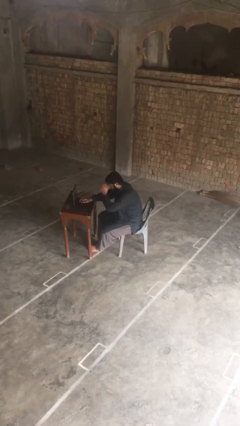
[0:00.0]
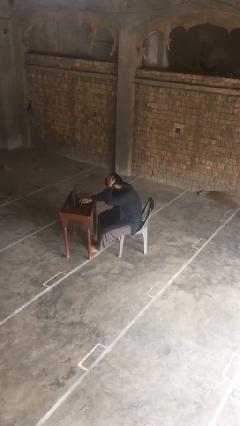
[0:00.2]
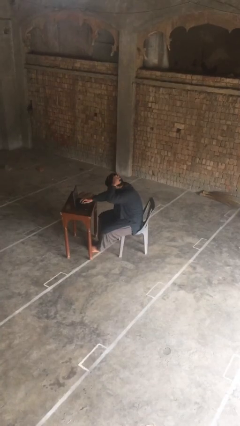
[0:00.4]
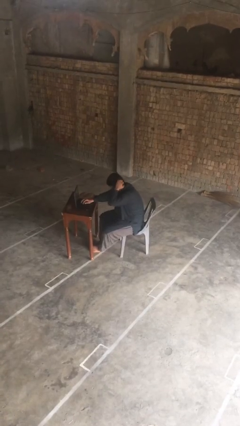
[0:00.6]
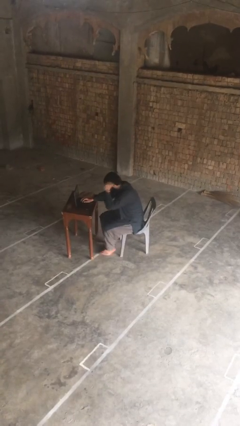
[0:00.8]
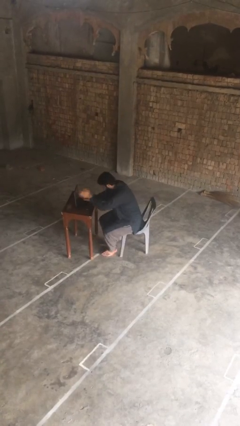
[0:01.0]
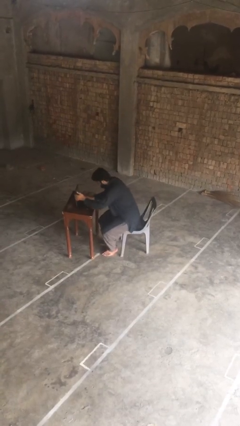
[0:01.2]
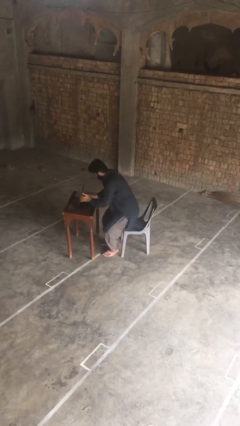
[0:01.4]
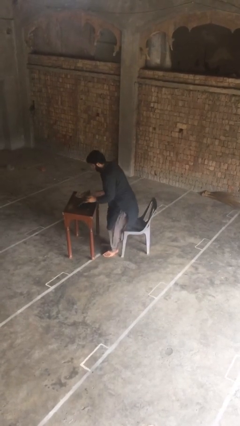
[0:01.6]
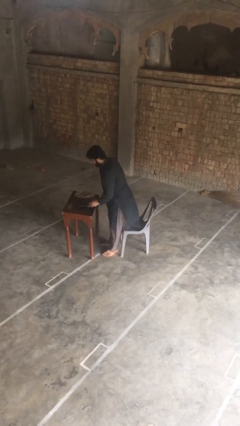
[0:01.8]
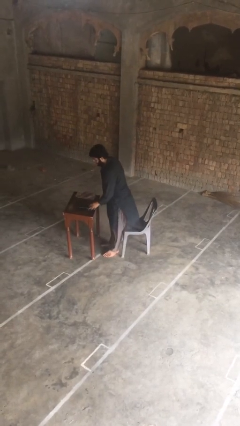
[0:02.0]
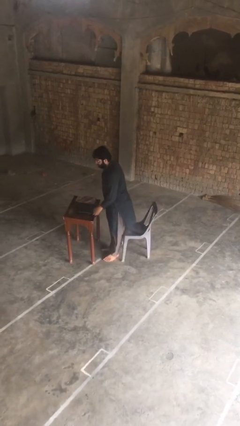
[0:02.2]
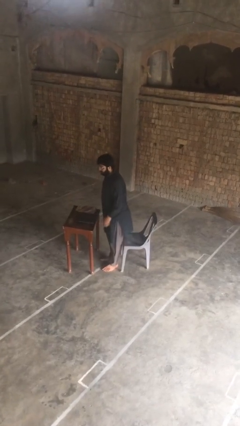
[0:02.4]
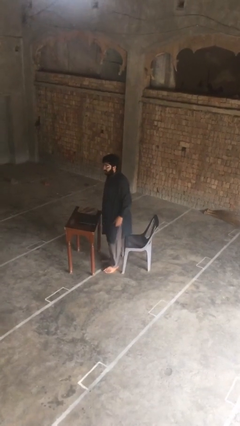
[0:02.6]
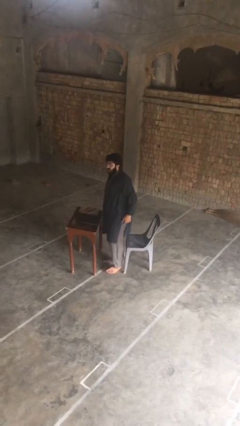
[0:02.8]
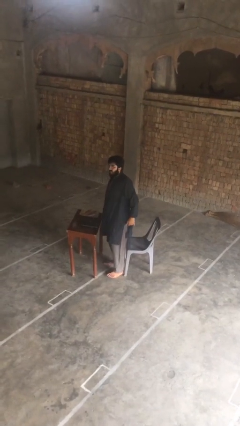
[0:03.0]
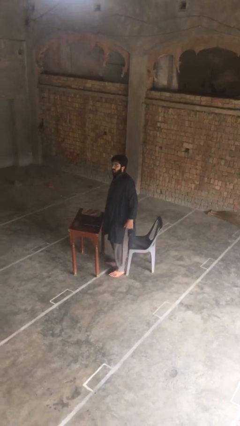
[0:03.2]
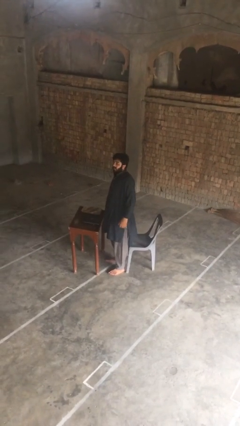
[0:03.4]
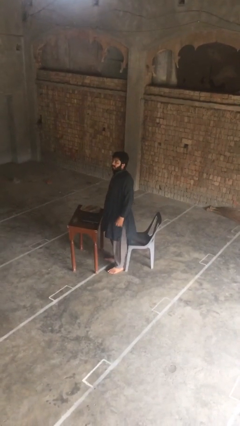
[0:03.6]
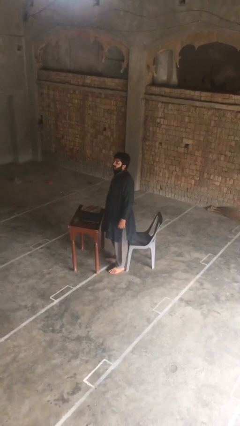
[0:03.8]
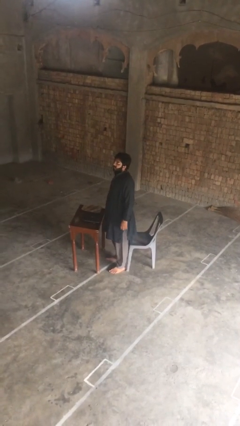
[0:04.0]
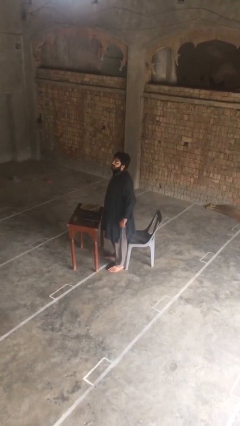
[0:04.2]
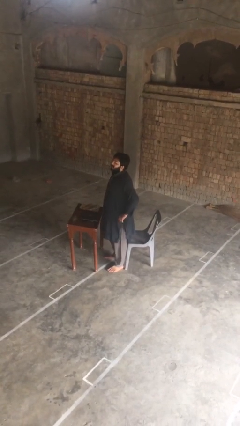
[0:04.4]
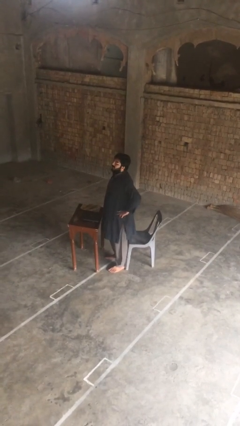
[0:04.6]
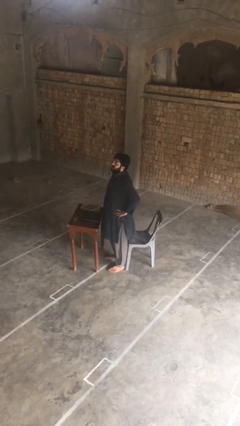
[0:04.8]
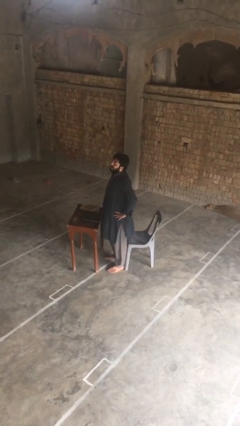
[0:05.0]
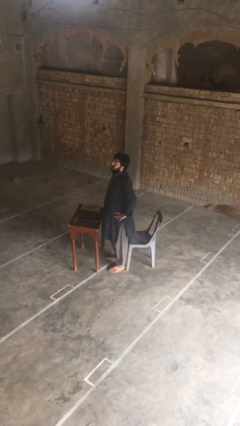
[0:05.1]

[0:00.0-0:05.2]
person stands up

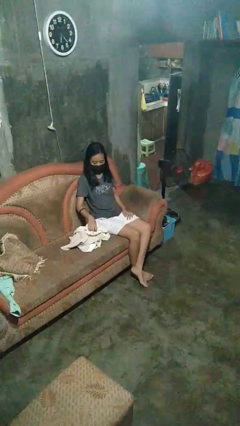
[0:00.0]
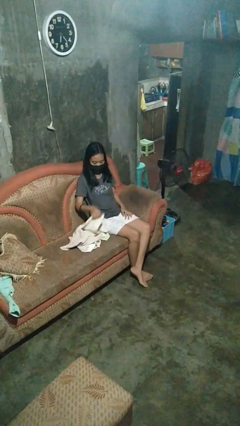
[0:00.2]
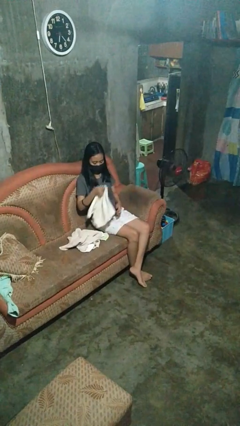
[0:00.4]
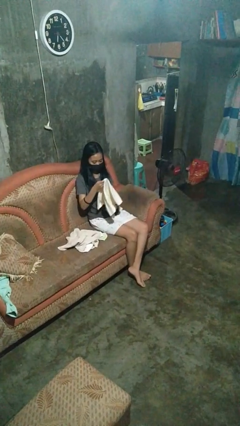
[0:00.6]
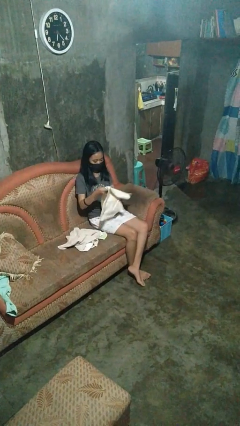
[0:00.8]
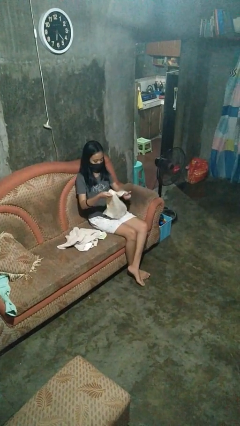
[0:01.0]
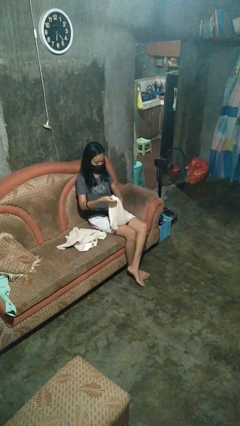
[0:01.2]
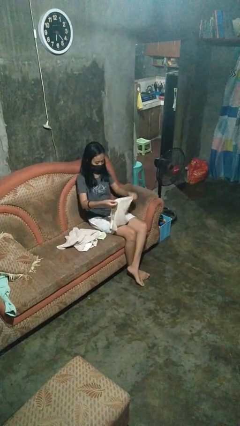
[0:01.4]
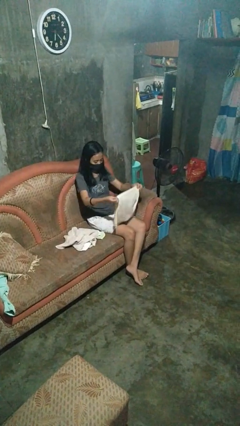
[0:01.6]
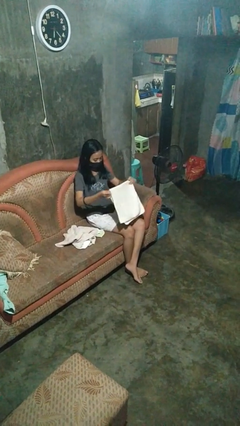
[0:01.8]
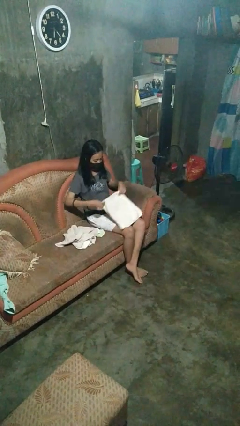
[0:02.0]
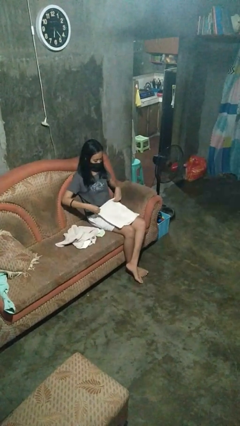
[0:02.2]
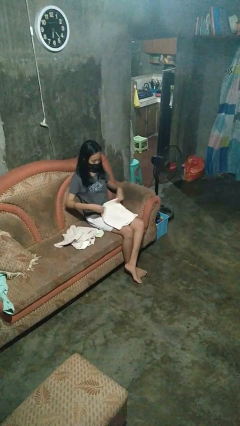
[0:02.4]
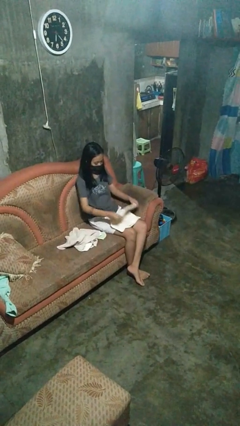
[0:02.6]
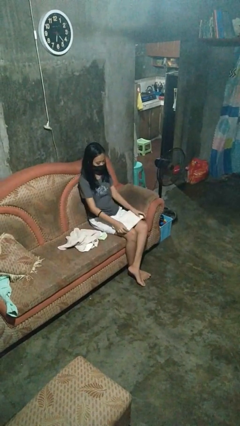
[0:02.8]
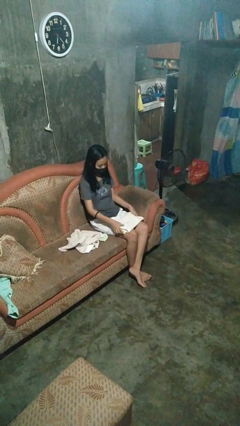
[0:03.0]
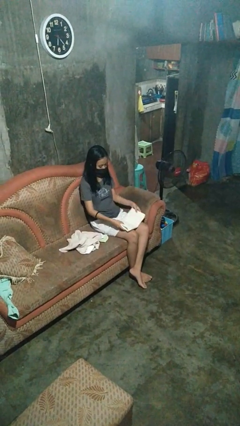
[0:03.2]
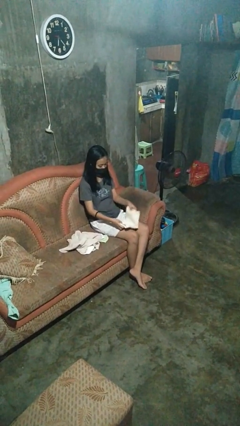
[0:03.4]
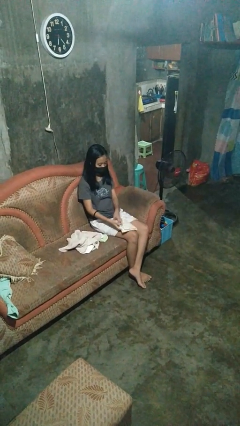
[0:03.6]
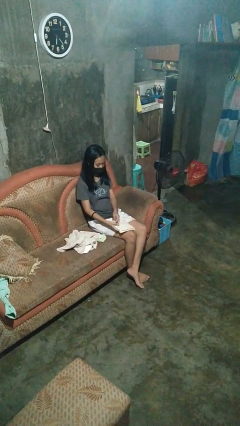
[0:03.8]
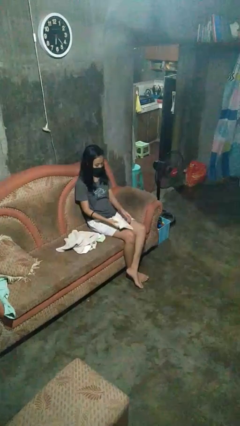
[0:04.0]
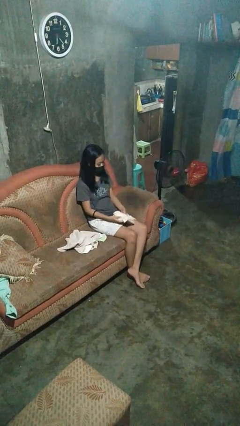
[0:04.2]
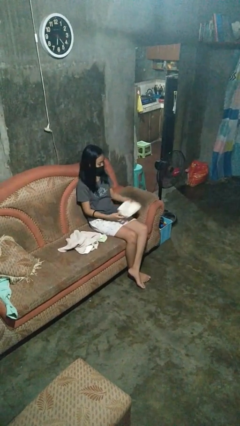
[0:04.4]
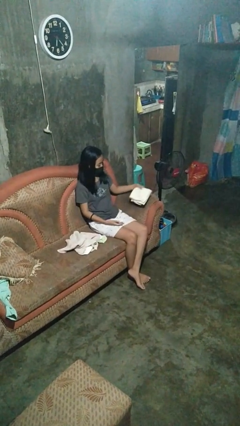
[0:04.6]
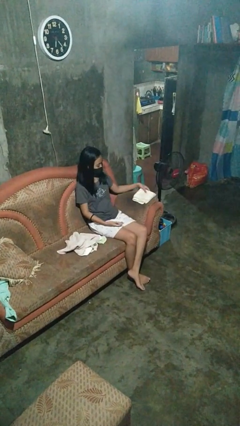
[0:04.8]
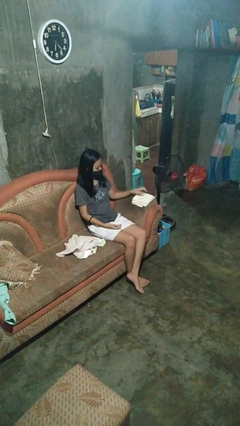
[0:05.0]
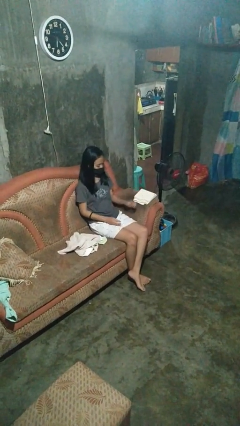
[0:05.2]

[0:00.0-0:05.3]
person folds towel

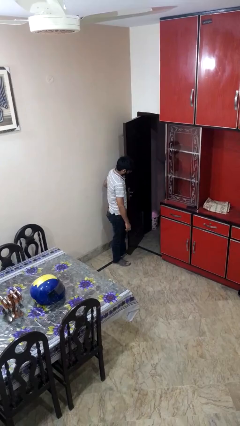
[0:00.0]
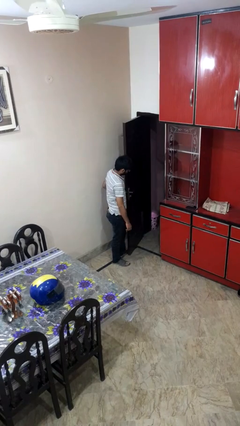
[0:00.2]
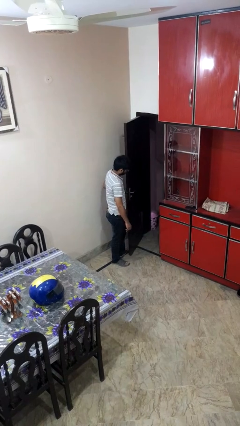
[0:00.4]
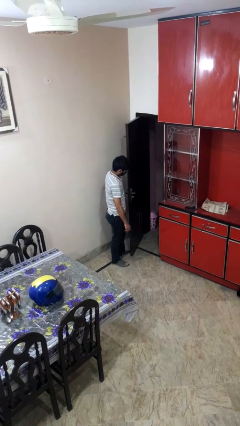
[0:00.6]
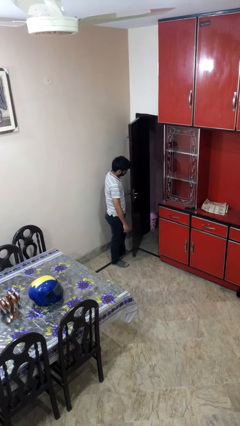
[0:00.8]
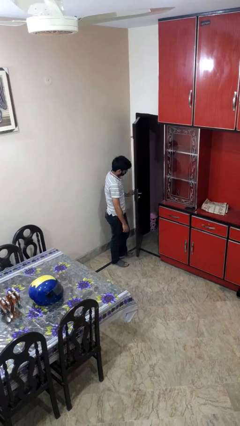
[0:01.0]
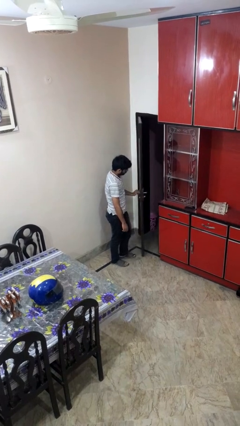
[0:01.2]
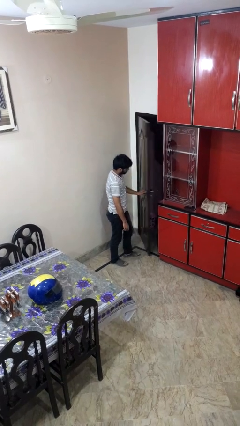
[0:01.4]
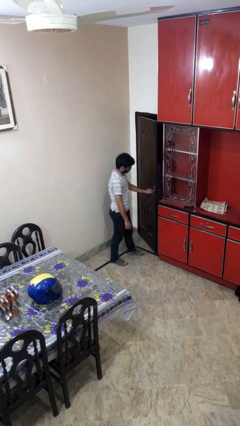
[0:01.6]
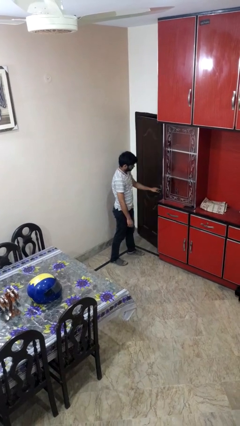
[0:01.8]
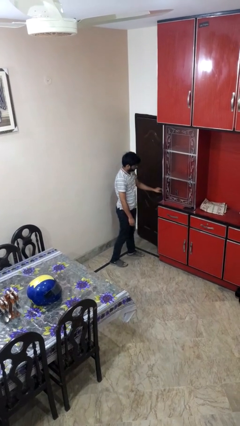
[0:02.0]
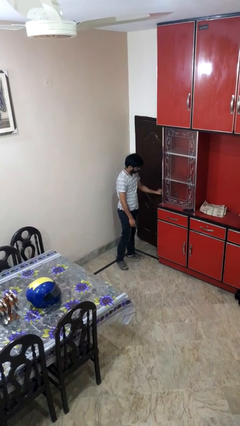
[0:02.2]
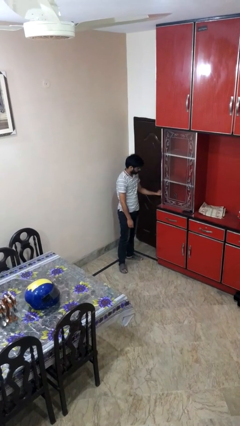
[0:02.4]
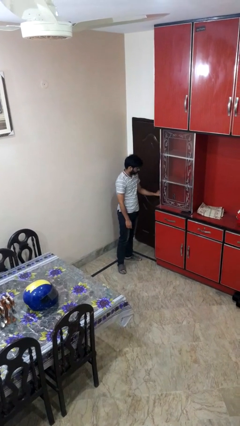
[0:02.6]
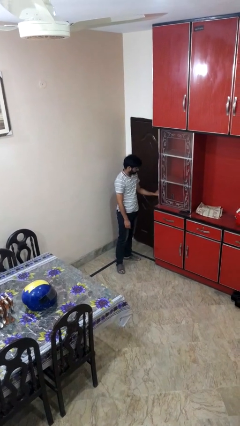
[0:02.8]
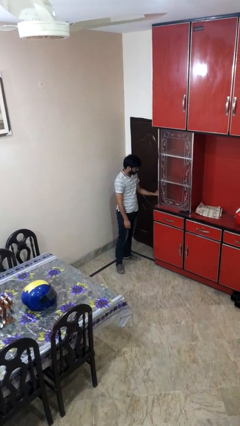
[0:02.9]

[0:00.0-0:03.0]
person closes facility door

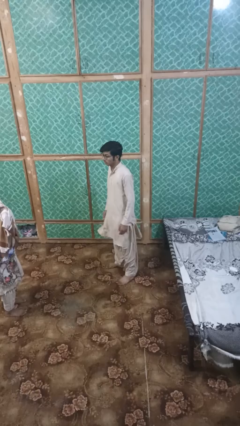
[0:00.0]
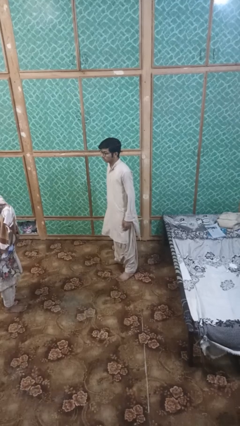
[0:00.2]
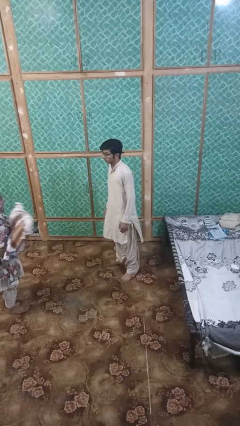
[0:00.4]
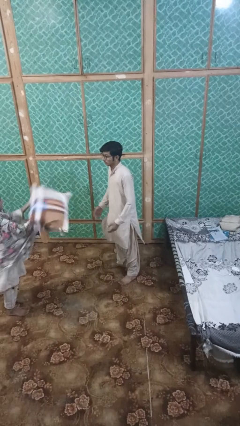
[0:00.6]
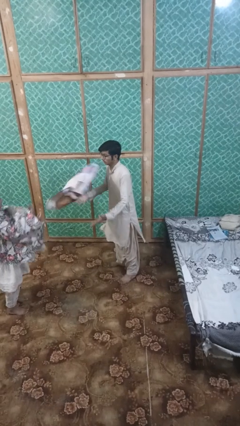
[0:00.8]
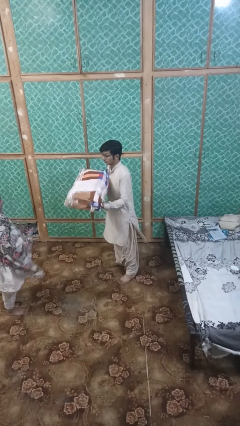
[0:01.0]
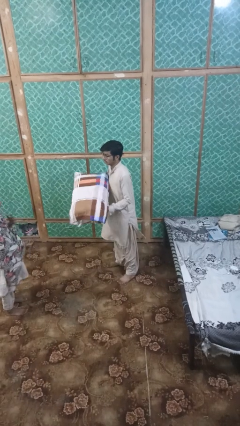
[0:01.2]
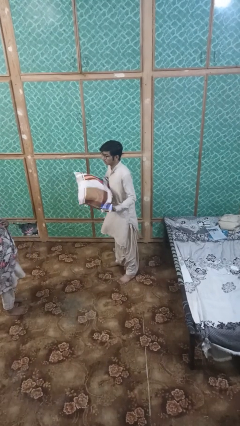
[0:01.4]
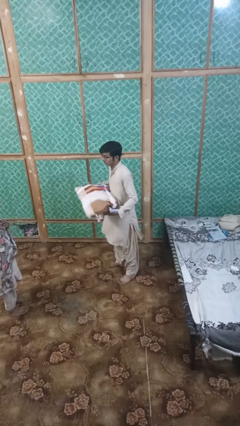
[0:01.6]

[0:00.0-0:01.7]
person catches object from person

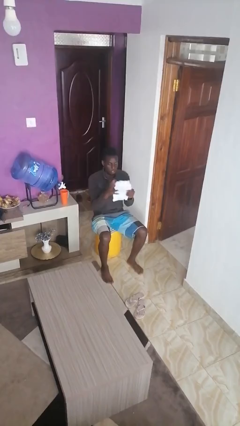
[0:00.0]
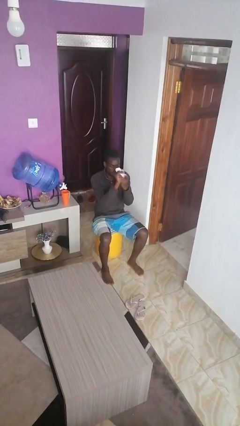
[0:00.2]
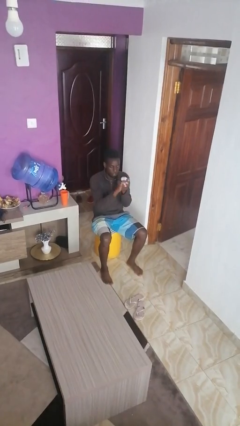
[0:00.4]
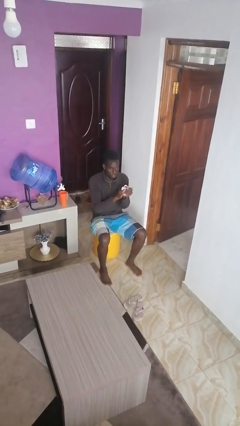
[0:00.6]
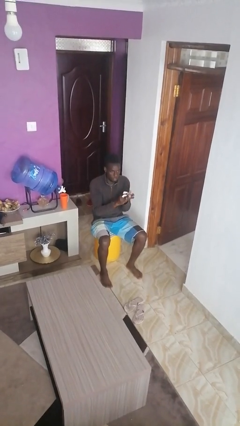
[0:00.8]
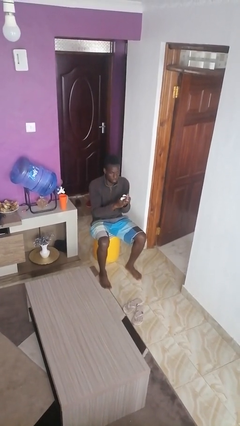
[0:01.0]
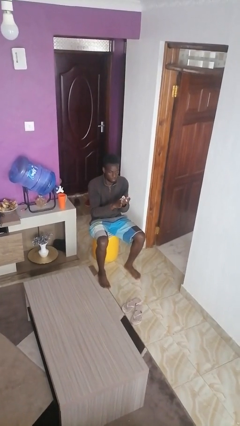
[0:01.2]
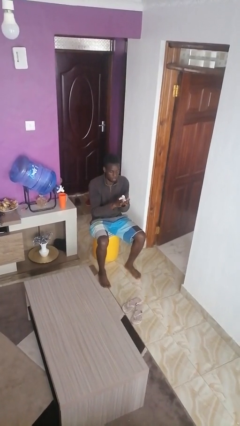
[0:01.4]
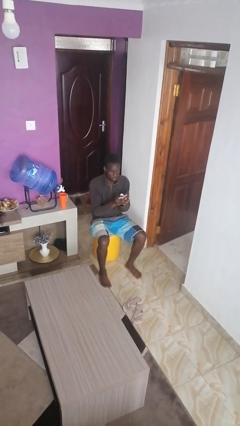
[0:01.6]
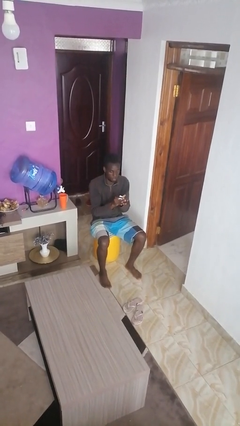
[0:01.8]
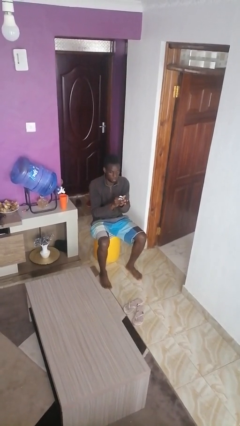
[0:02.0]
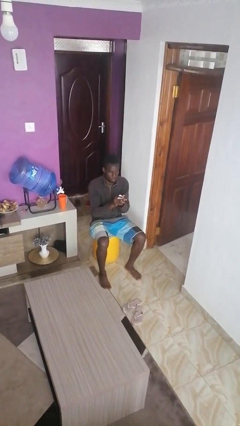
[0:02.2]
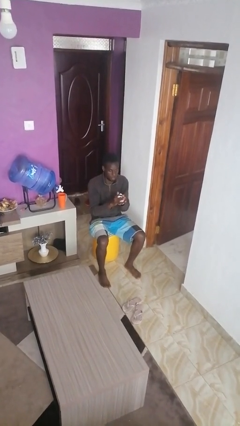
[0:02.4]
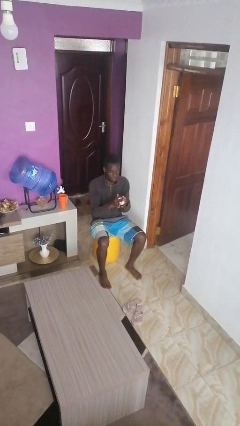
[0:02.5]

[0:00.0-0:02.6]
person crumples paper
